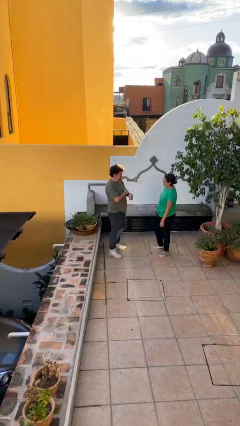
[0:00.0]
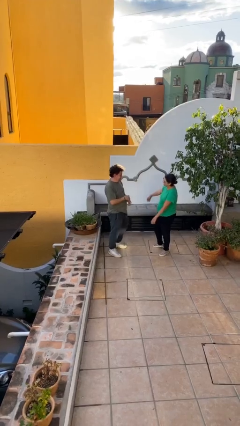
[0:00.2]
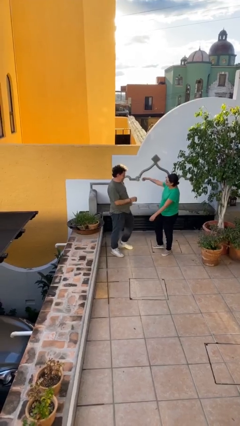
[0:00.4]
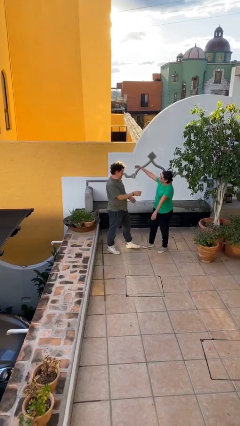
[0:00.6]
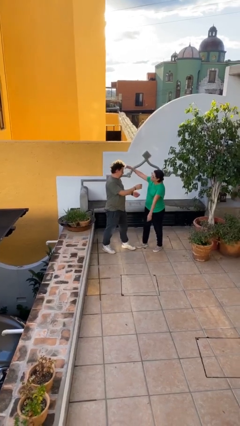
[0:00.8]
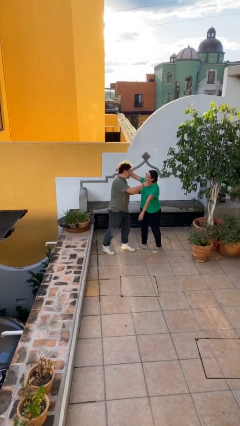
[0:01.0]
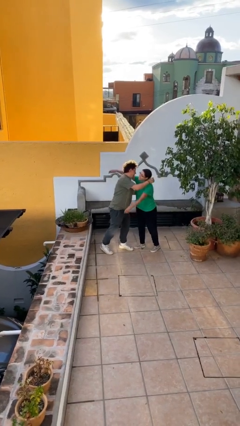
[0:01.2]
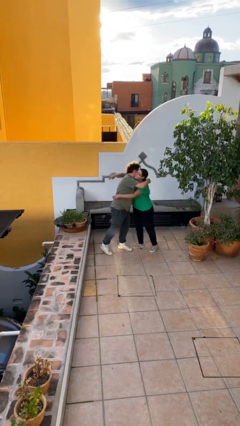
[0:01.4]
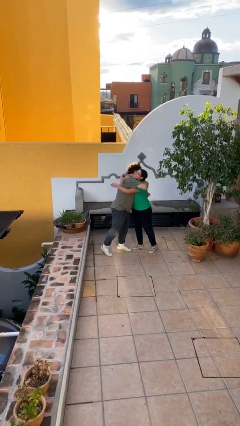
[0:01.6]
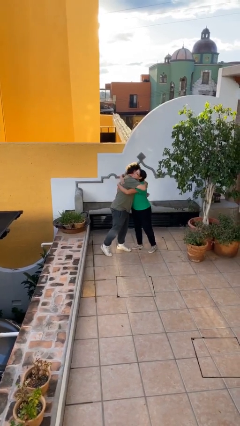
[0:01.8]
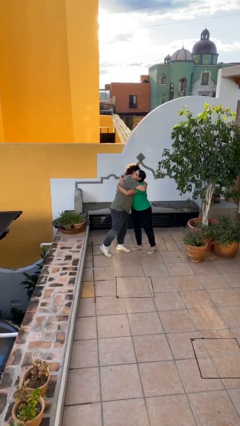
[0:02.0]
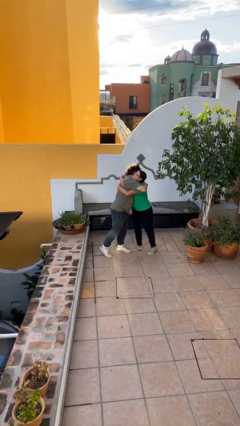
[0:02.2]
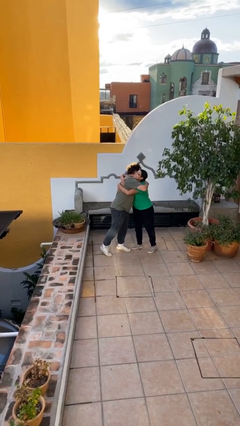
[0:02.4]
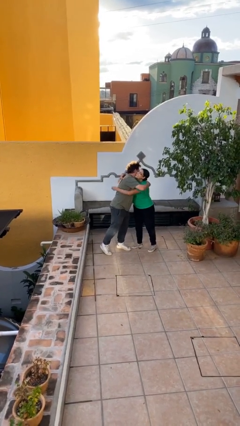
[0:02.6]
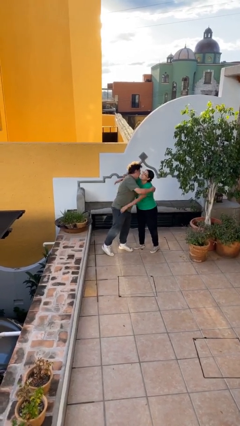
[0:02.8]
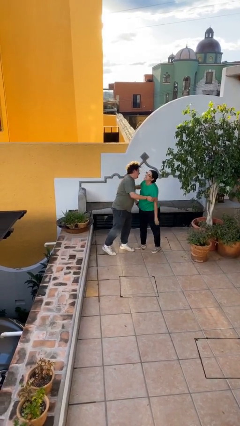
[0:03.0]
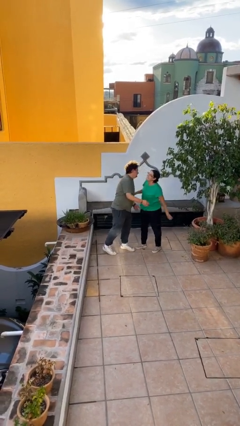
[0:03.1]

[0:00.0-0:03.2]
person embraces person

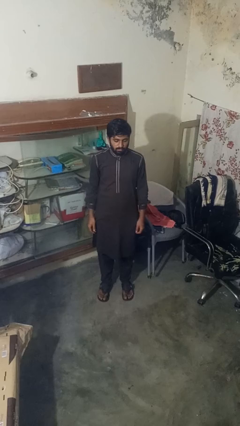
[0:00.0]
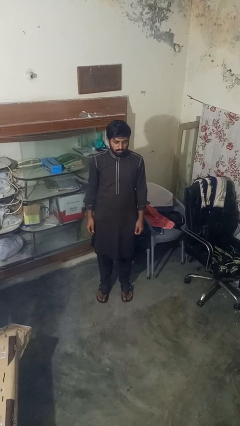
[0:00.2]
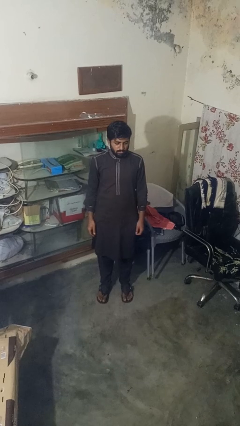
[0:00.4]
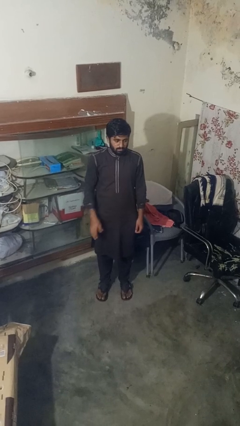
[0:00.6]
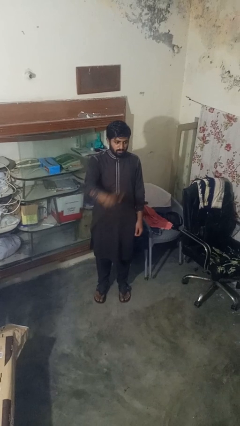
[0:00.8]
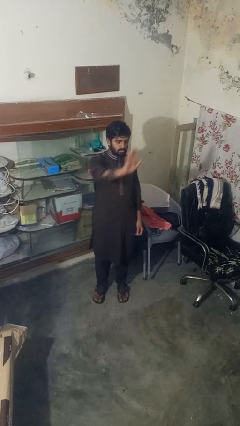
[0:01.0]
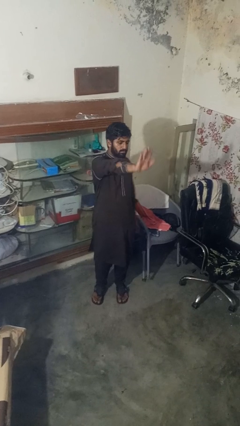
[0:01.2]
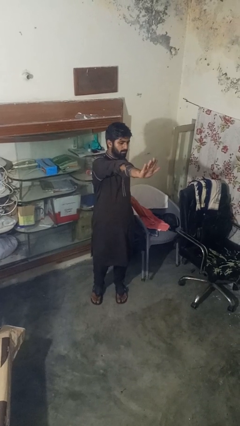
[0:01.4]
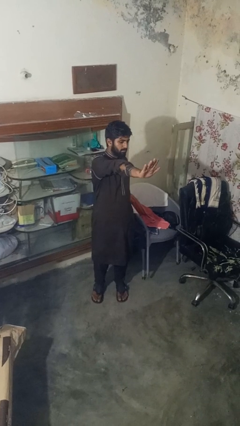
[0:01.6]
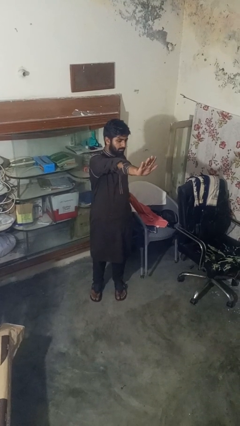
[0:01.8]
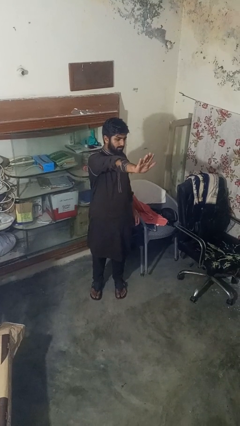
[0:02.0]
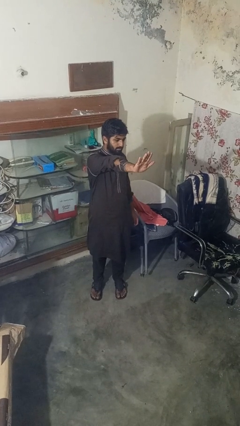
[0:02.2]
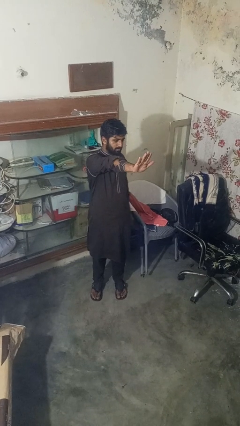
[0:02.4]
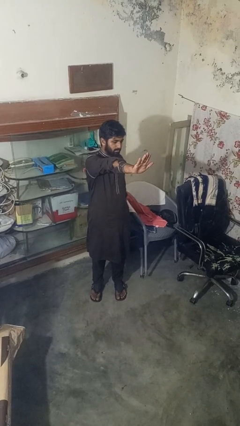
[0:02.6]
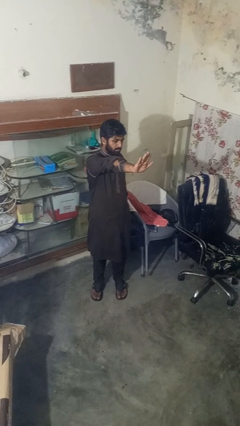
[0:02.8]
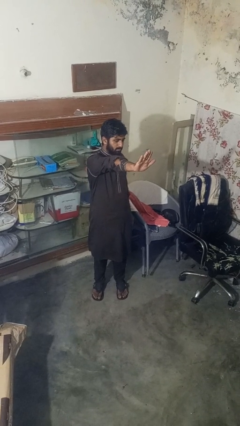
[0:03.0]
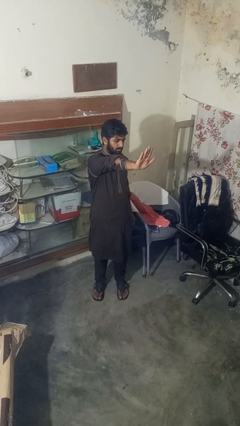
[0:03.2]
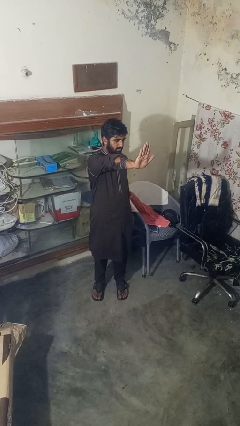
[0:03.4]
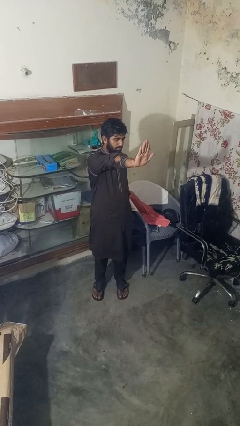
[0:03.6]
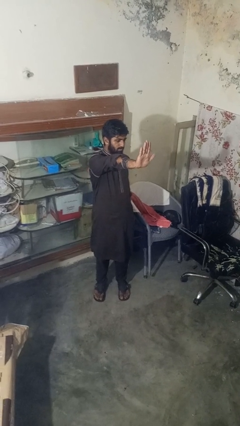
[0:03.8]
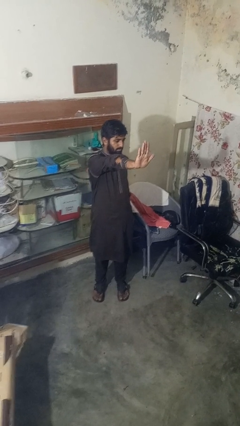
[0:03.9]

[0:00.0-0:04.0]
person gestures stop

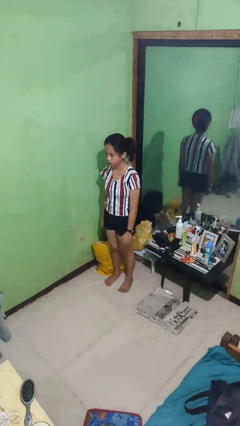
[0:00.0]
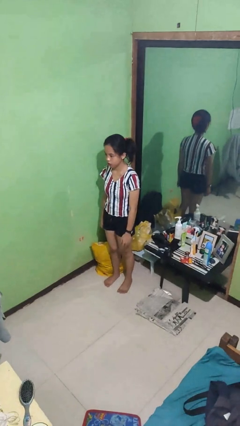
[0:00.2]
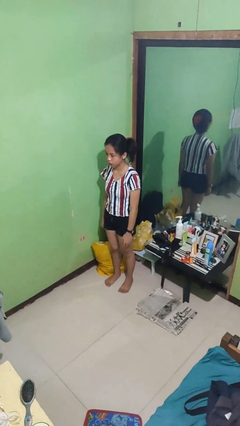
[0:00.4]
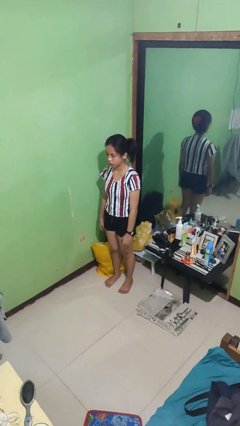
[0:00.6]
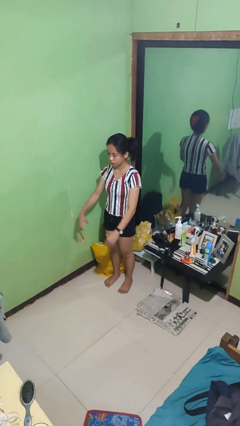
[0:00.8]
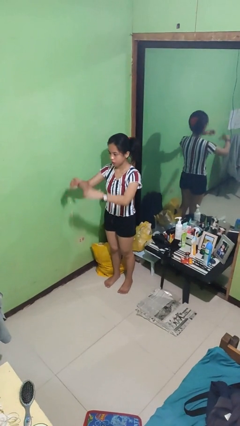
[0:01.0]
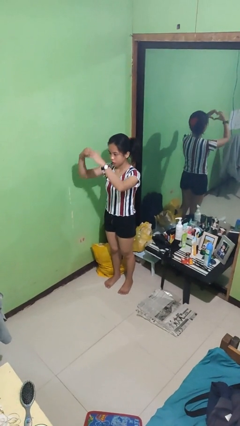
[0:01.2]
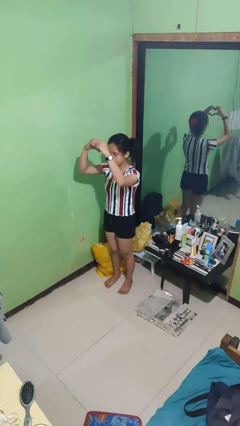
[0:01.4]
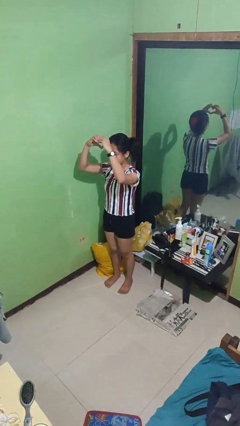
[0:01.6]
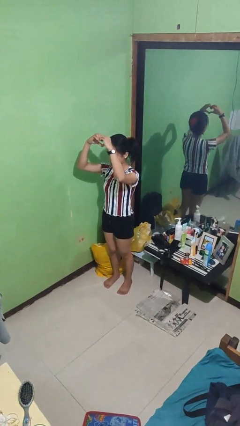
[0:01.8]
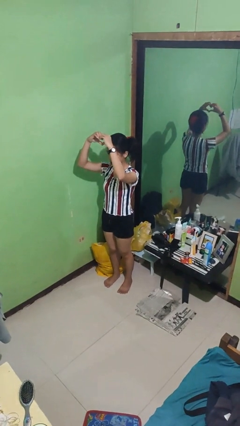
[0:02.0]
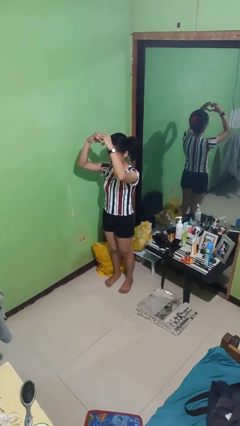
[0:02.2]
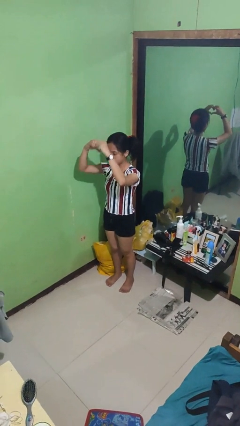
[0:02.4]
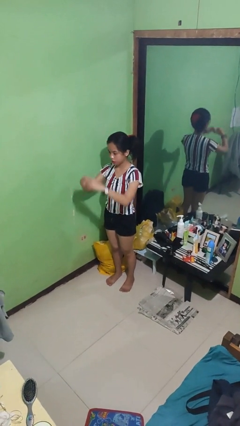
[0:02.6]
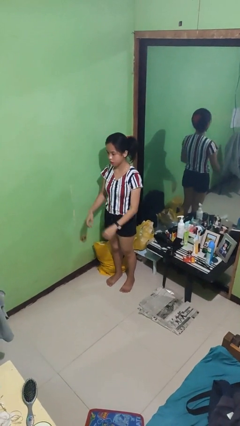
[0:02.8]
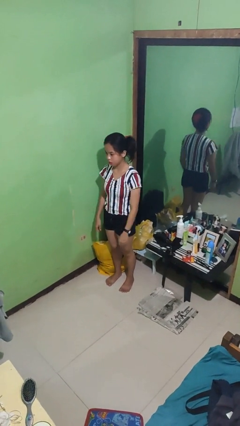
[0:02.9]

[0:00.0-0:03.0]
person gestures heart

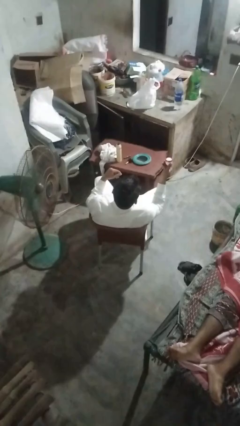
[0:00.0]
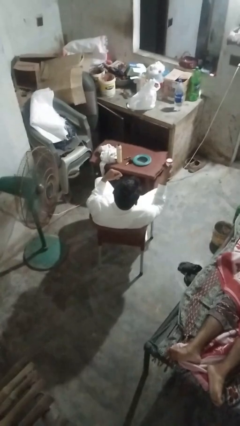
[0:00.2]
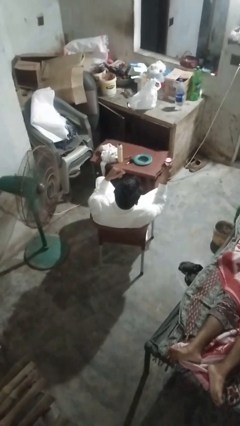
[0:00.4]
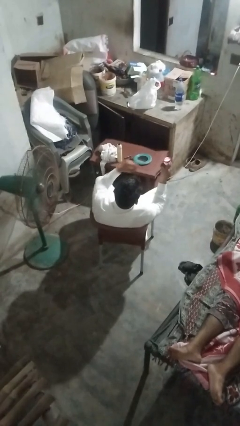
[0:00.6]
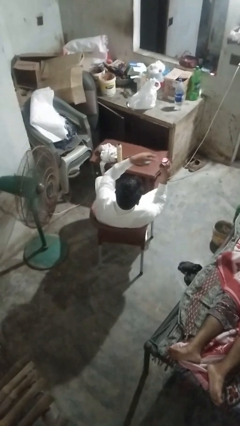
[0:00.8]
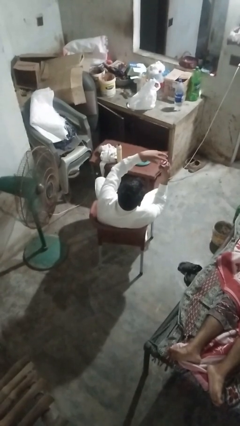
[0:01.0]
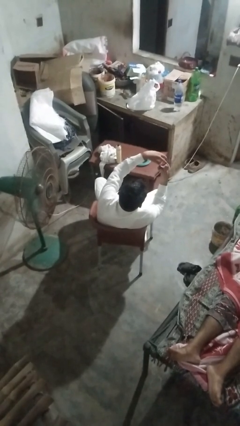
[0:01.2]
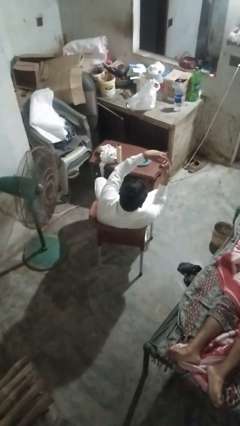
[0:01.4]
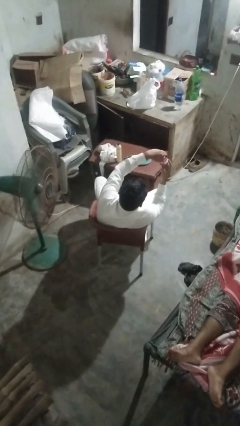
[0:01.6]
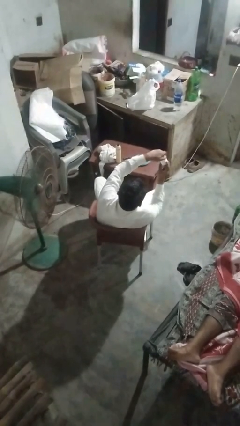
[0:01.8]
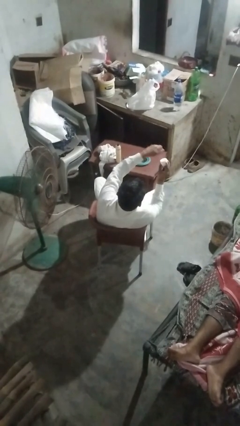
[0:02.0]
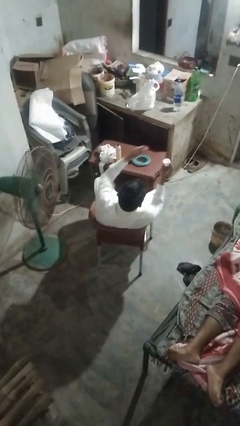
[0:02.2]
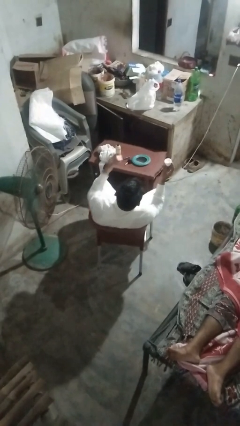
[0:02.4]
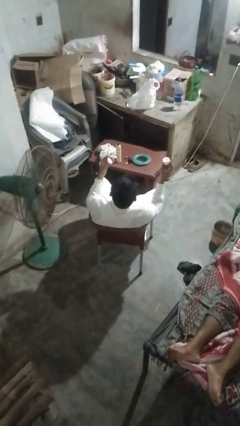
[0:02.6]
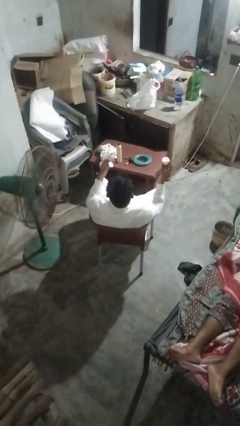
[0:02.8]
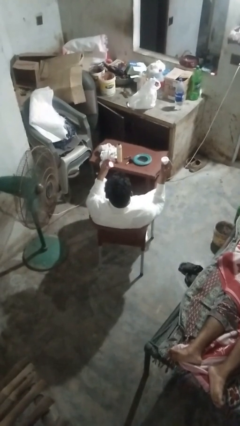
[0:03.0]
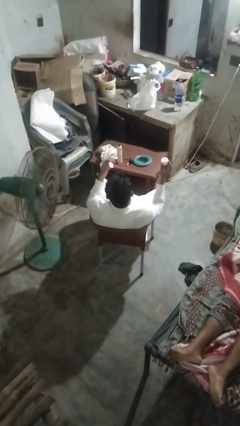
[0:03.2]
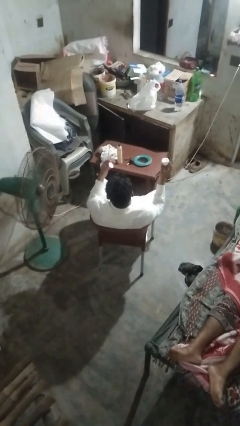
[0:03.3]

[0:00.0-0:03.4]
person opens jar

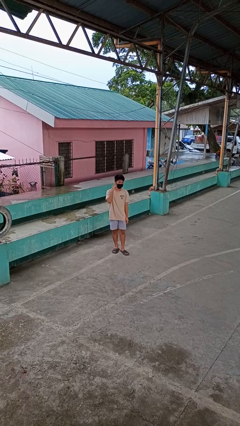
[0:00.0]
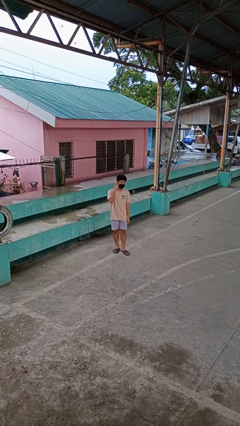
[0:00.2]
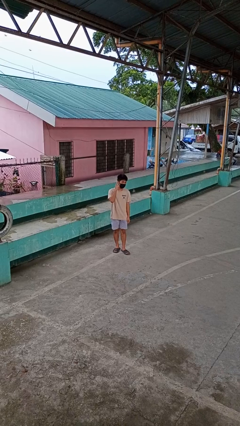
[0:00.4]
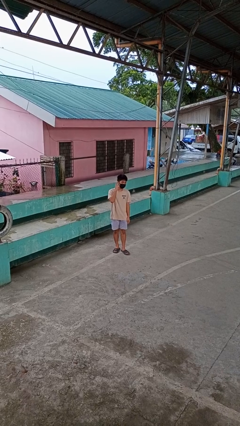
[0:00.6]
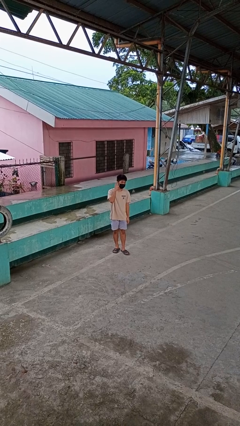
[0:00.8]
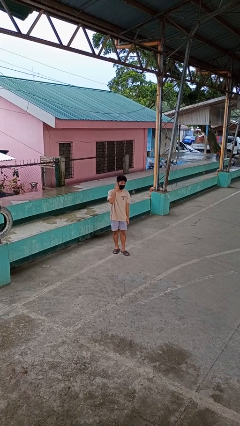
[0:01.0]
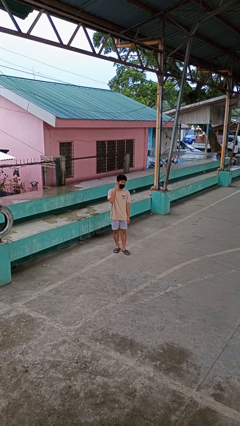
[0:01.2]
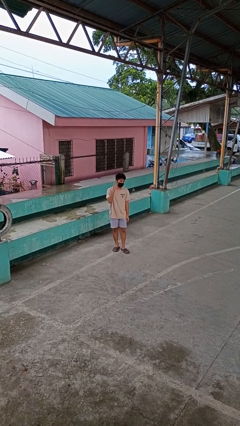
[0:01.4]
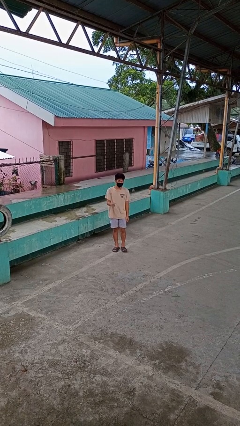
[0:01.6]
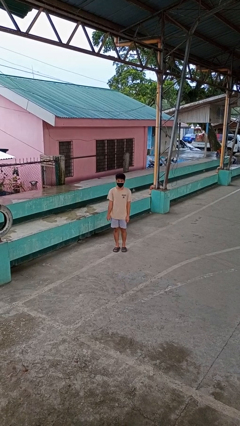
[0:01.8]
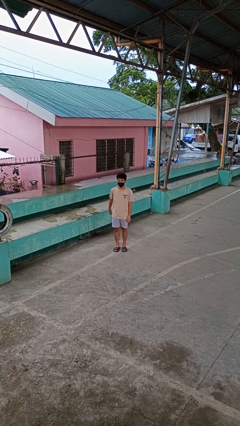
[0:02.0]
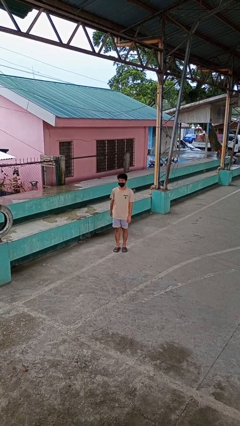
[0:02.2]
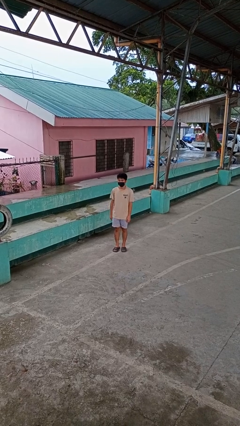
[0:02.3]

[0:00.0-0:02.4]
person gestures listen closely

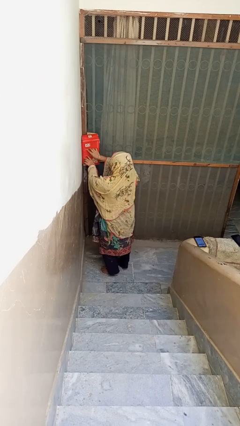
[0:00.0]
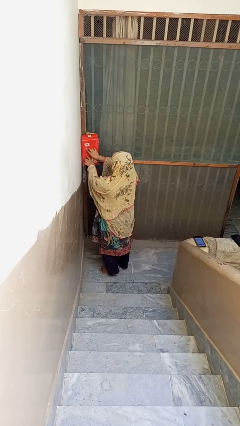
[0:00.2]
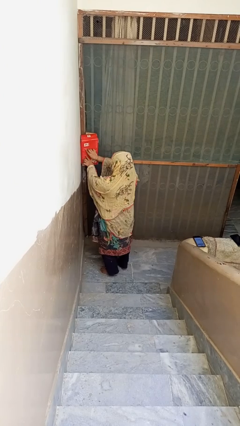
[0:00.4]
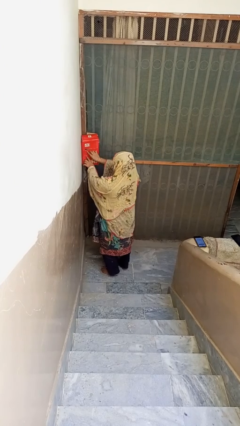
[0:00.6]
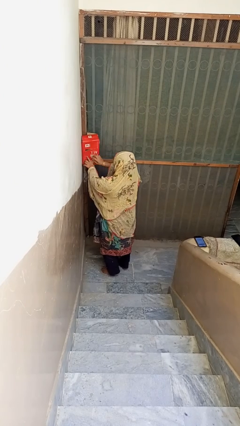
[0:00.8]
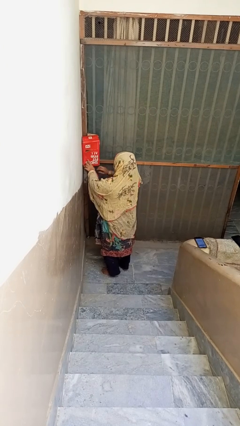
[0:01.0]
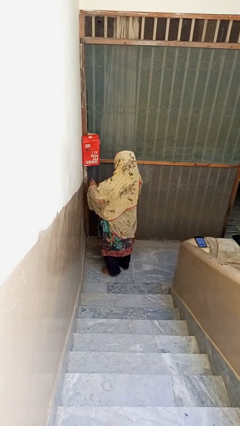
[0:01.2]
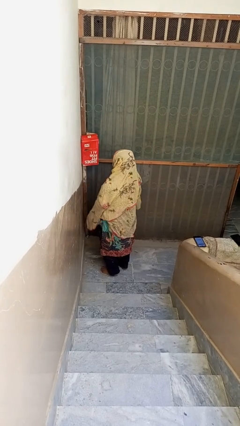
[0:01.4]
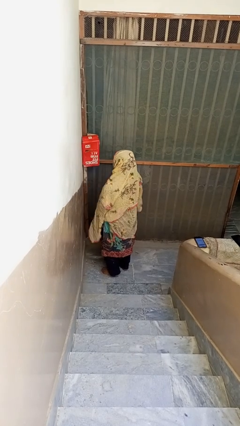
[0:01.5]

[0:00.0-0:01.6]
person closes mailbox

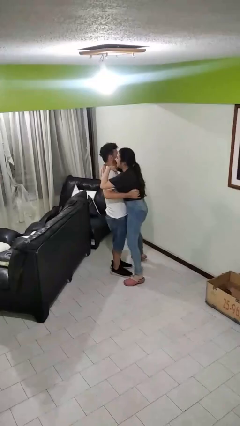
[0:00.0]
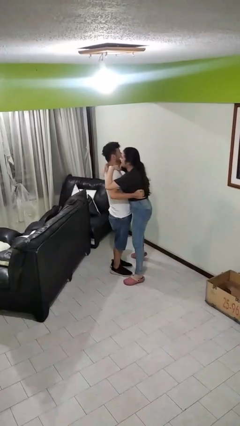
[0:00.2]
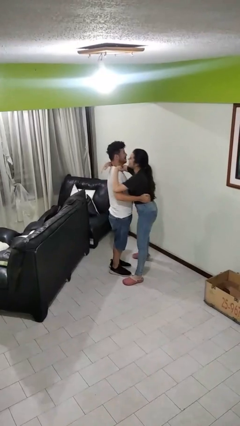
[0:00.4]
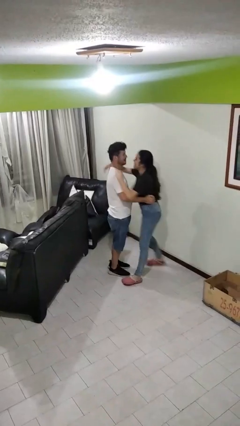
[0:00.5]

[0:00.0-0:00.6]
person puts down person
